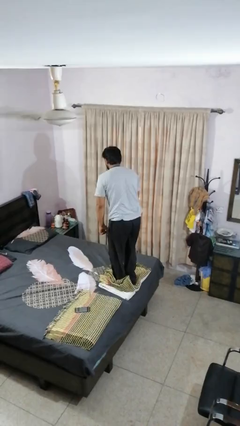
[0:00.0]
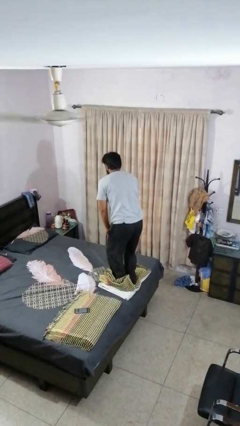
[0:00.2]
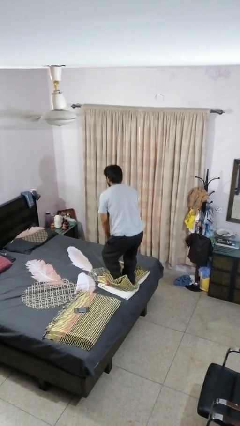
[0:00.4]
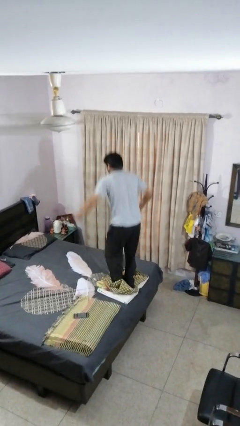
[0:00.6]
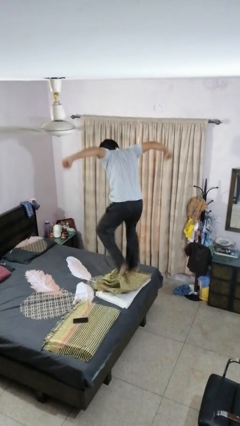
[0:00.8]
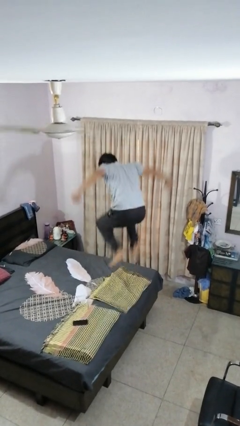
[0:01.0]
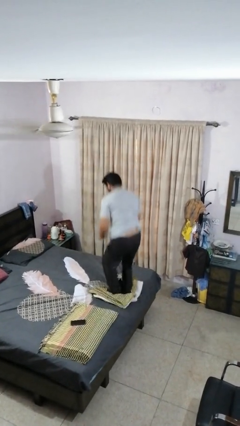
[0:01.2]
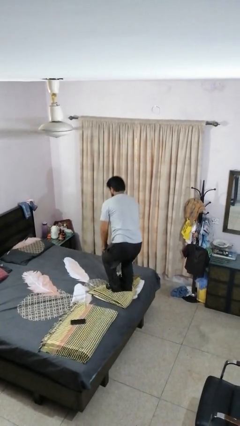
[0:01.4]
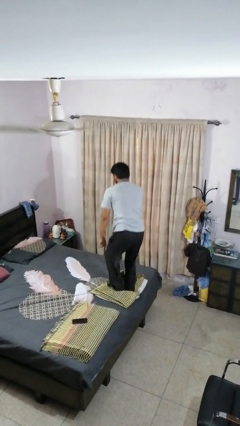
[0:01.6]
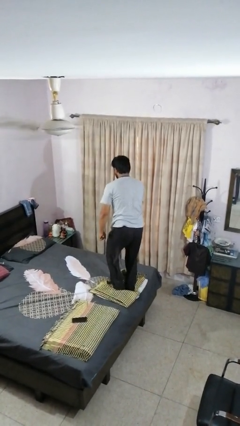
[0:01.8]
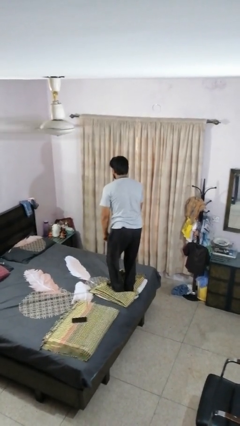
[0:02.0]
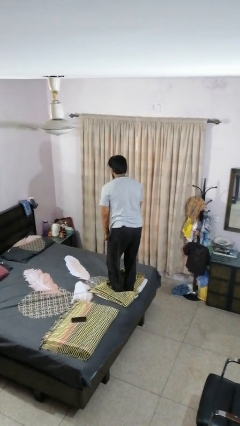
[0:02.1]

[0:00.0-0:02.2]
person jumps on bed

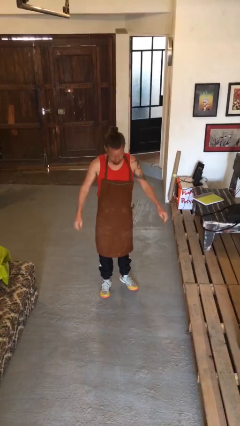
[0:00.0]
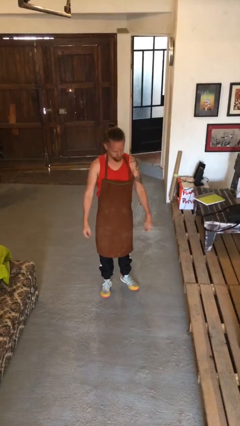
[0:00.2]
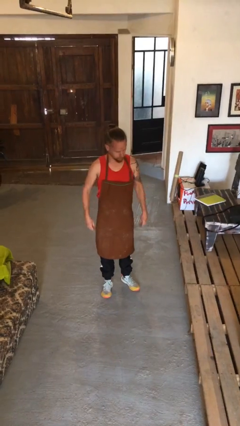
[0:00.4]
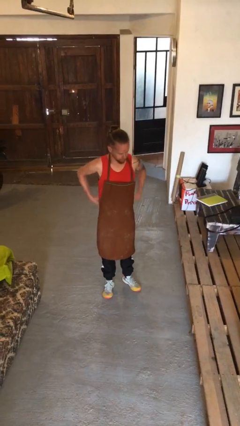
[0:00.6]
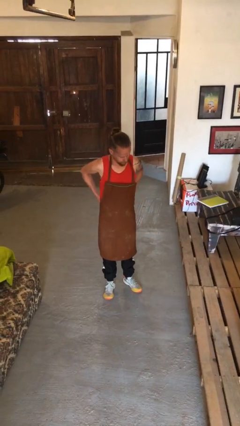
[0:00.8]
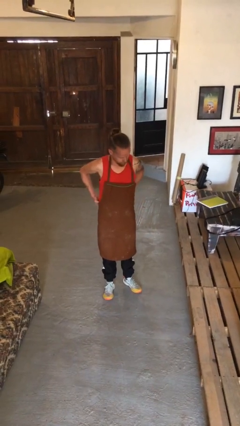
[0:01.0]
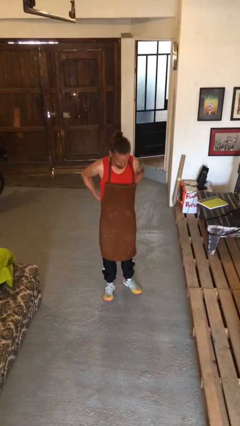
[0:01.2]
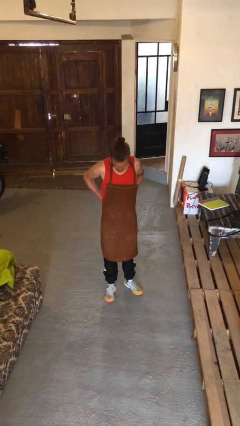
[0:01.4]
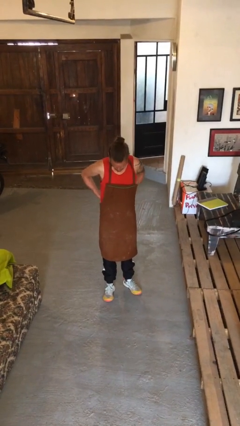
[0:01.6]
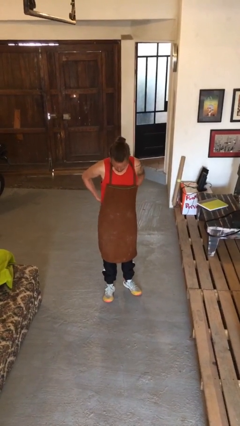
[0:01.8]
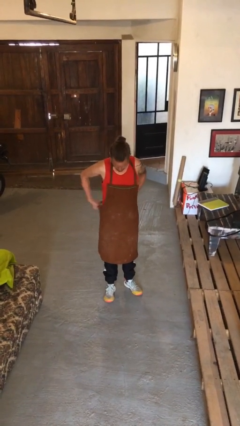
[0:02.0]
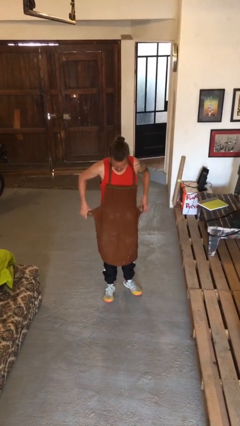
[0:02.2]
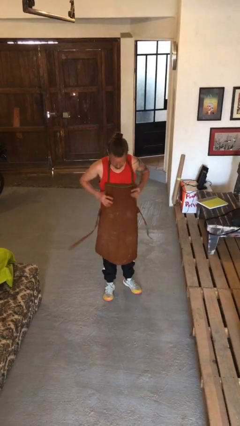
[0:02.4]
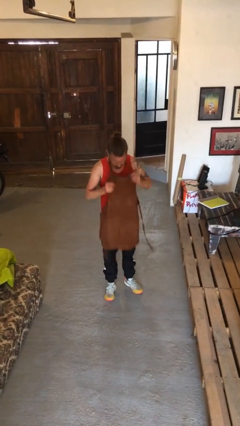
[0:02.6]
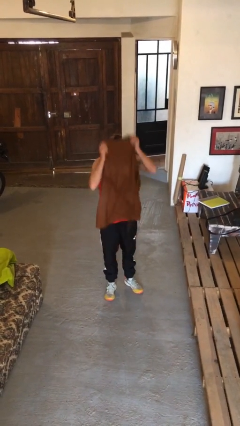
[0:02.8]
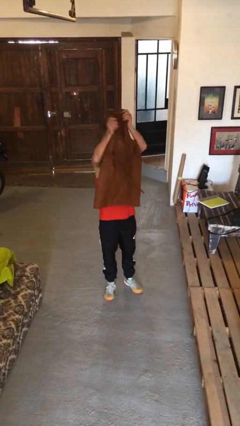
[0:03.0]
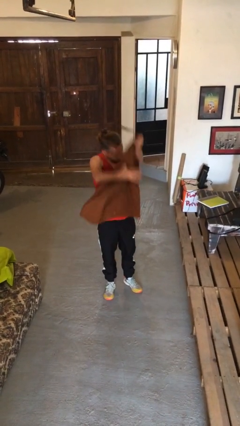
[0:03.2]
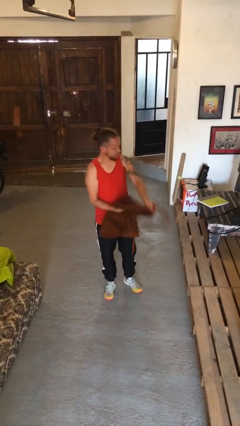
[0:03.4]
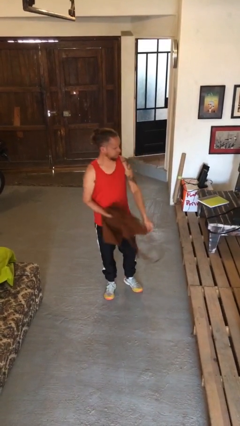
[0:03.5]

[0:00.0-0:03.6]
person takes off apron

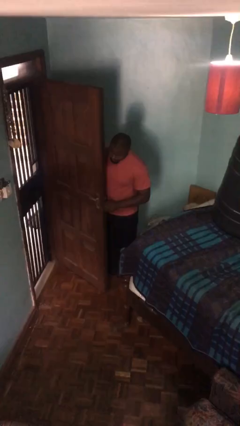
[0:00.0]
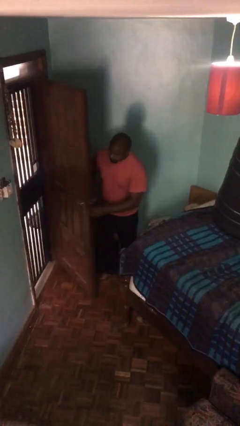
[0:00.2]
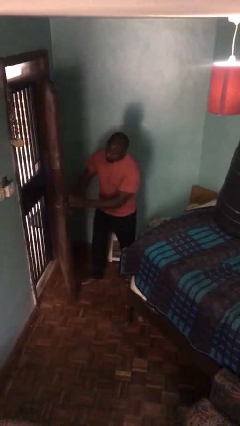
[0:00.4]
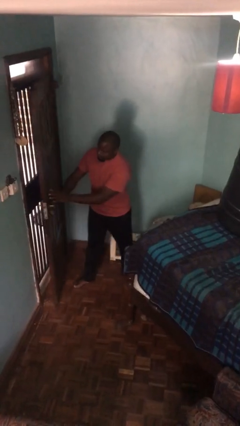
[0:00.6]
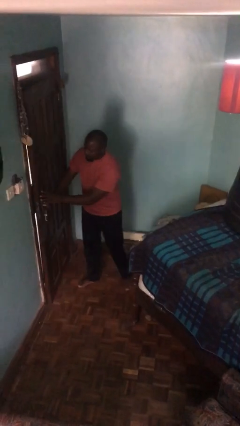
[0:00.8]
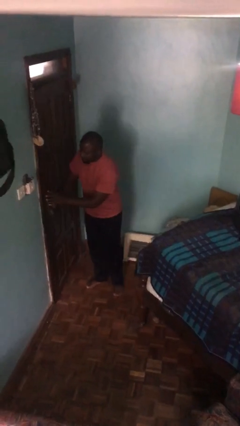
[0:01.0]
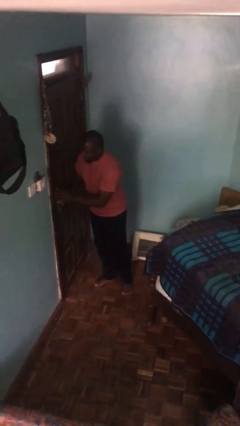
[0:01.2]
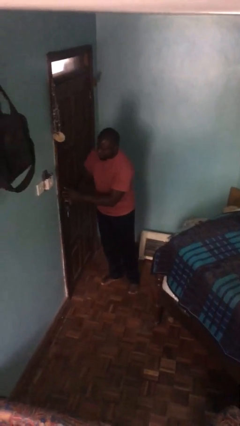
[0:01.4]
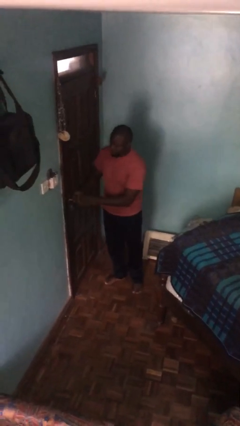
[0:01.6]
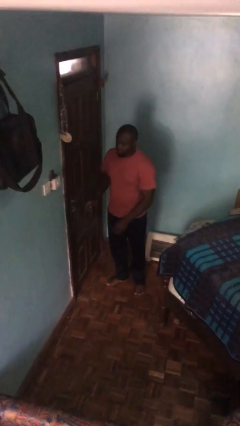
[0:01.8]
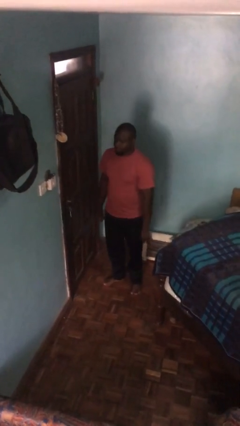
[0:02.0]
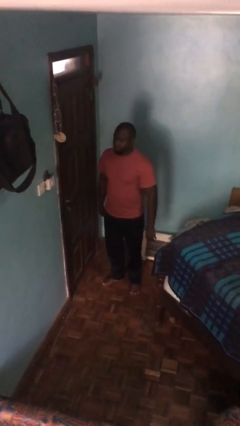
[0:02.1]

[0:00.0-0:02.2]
person closes facility door

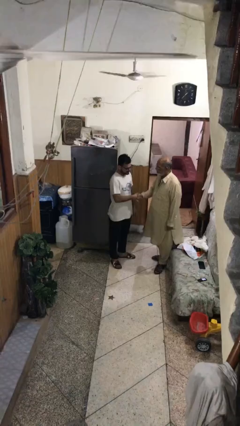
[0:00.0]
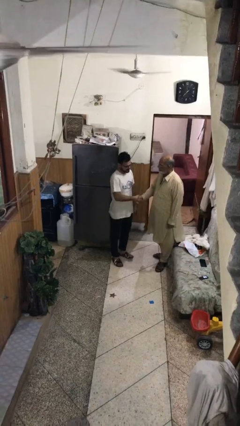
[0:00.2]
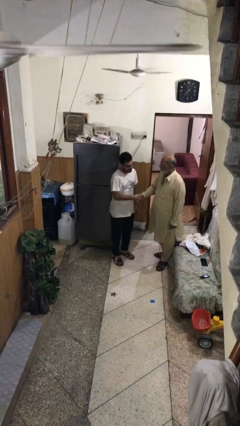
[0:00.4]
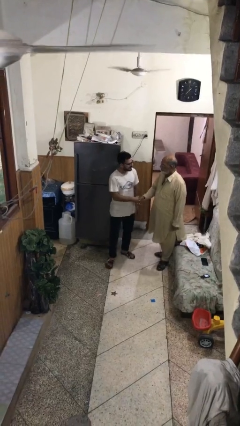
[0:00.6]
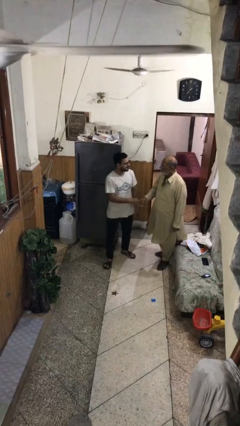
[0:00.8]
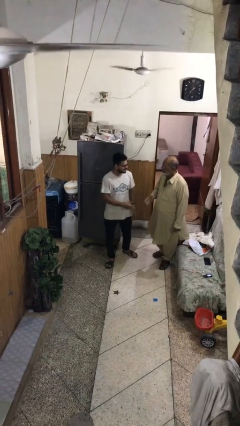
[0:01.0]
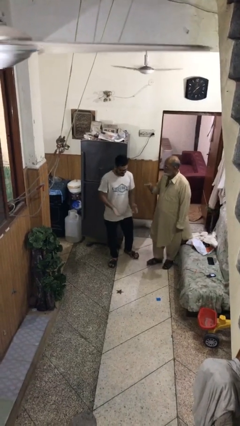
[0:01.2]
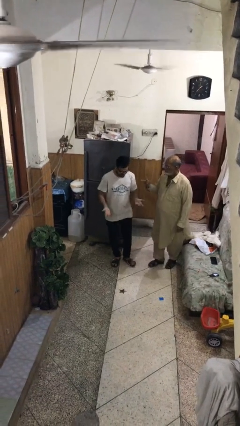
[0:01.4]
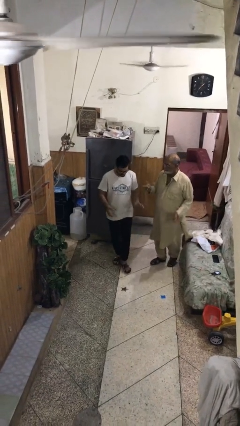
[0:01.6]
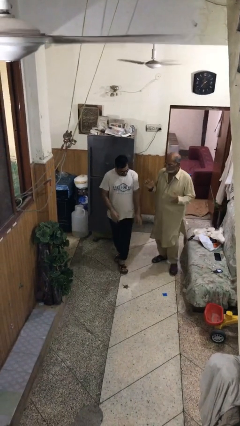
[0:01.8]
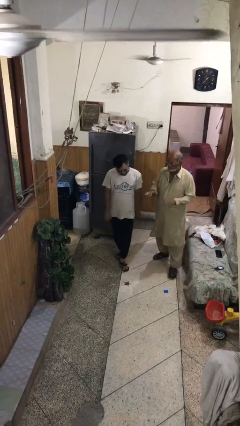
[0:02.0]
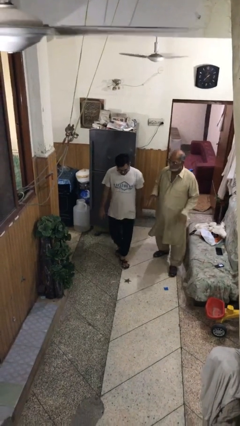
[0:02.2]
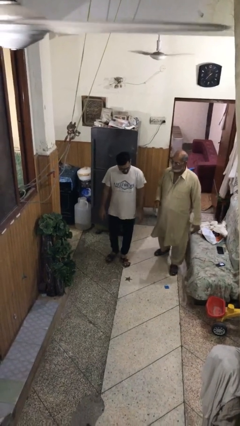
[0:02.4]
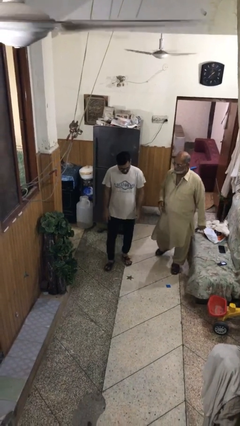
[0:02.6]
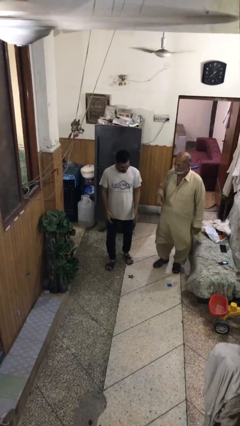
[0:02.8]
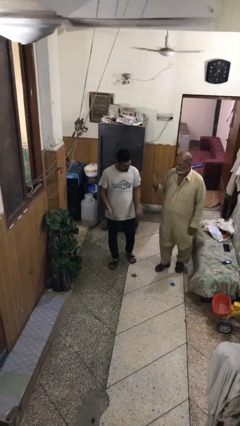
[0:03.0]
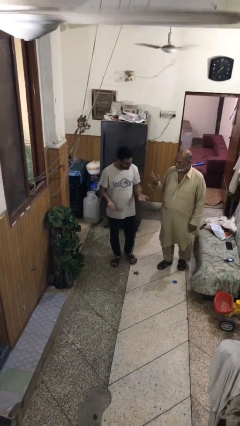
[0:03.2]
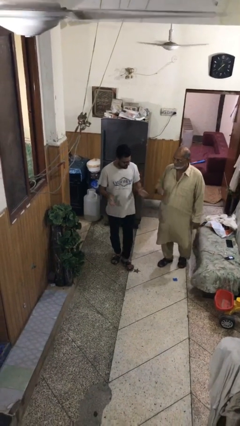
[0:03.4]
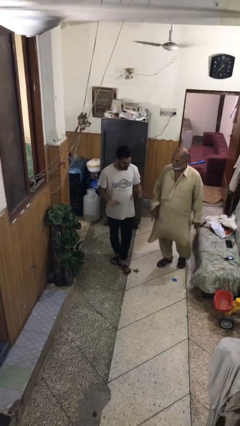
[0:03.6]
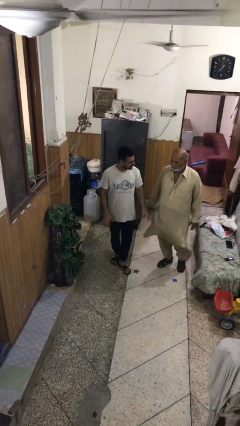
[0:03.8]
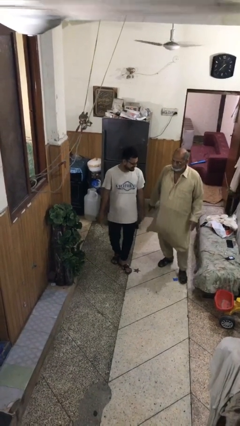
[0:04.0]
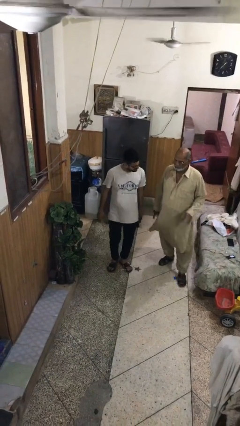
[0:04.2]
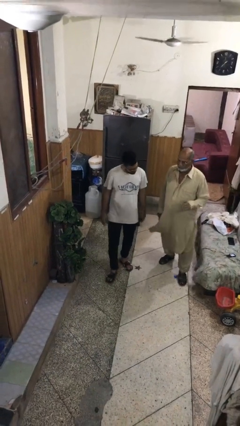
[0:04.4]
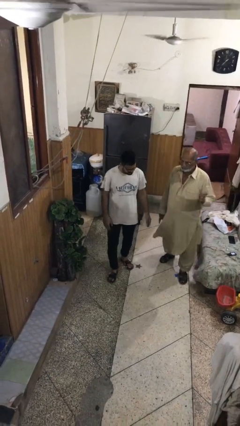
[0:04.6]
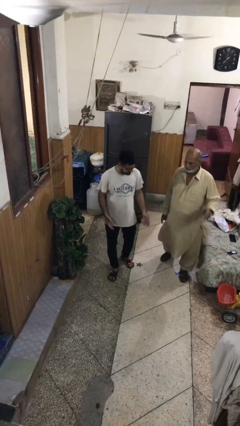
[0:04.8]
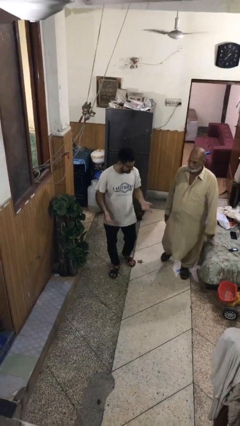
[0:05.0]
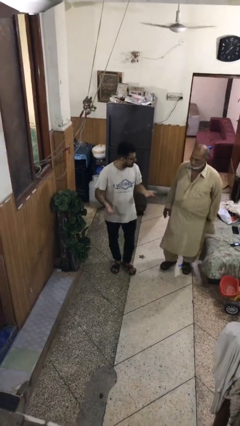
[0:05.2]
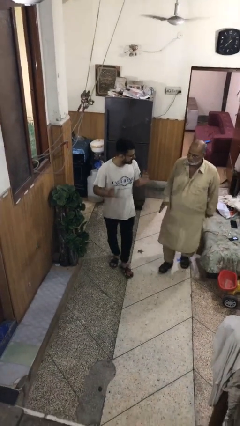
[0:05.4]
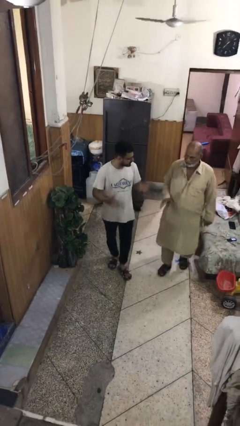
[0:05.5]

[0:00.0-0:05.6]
person talks to person

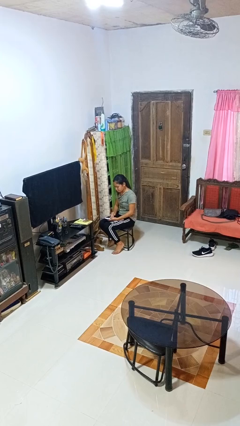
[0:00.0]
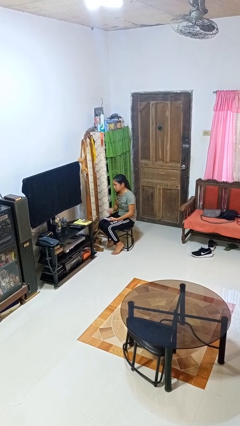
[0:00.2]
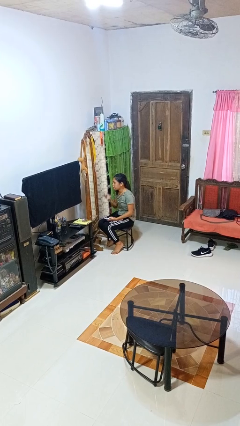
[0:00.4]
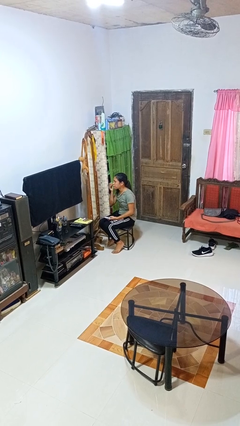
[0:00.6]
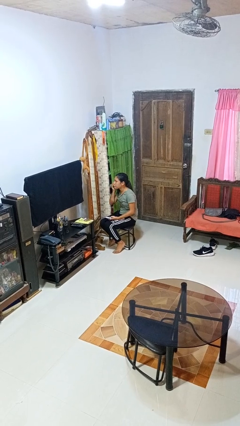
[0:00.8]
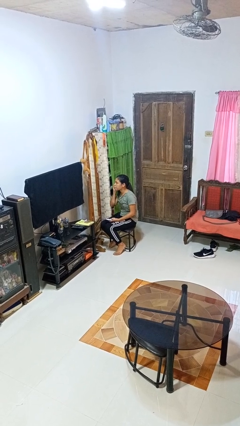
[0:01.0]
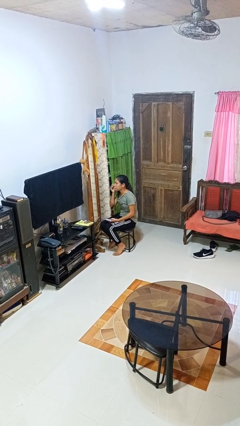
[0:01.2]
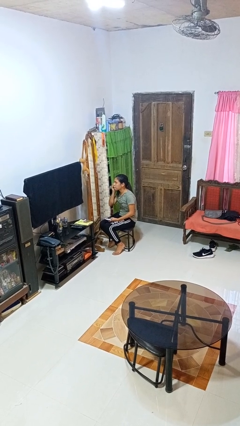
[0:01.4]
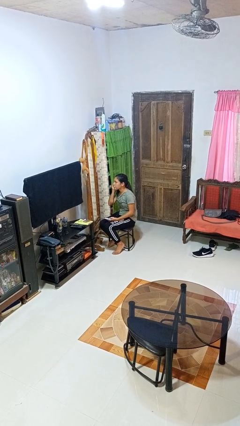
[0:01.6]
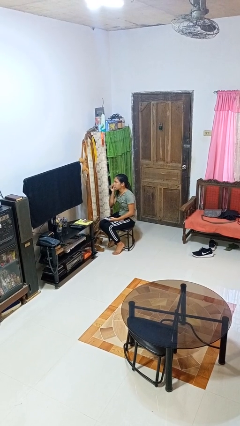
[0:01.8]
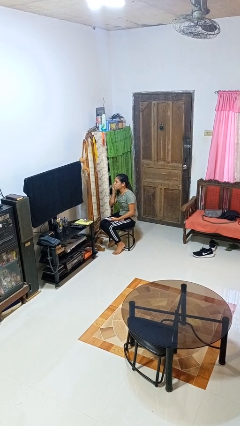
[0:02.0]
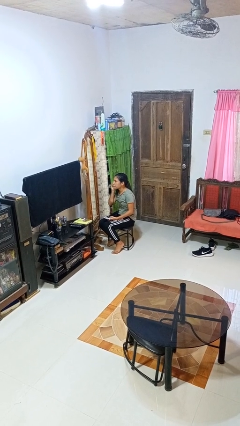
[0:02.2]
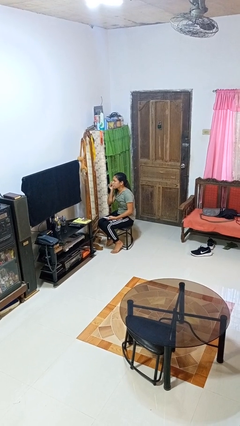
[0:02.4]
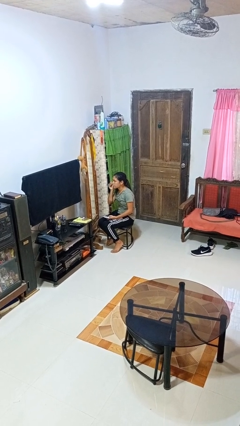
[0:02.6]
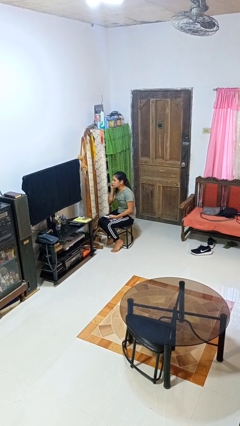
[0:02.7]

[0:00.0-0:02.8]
person applies foundation makeup

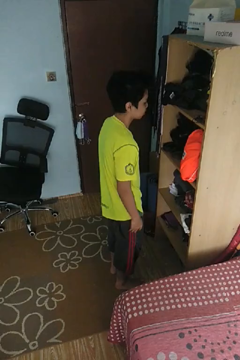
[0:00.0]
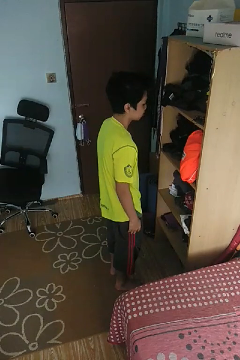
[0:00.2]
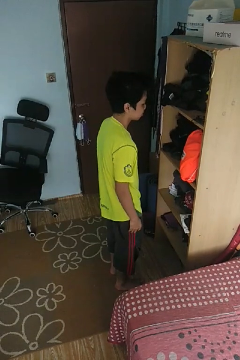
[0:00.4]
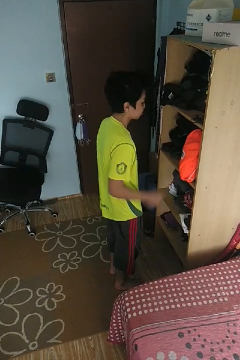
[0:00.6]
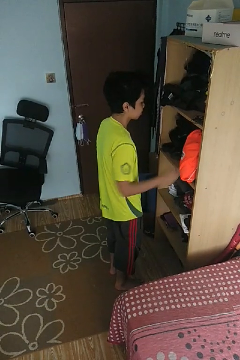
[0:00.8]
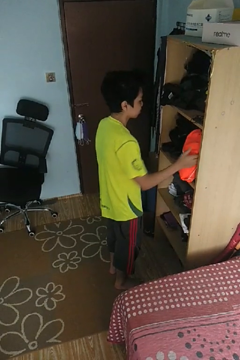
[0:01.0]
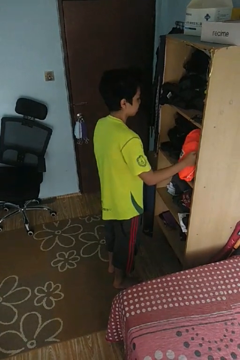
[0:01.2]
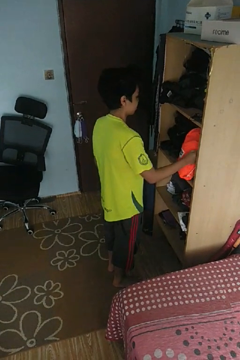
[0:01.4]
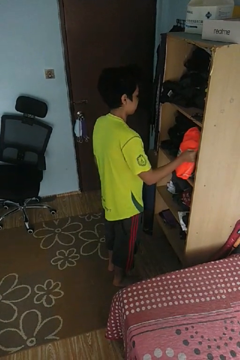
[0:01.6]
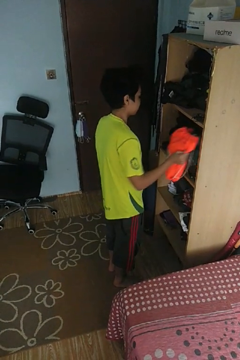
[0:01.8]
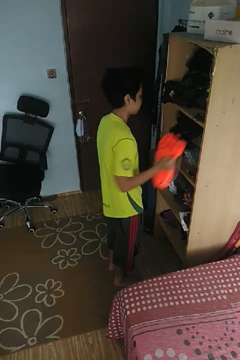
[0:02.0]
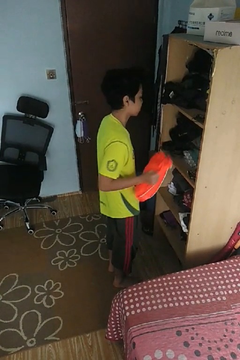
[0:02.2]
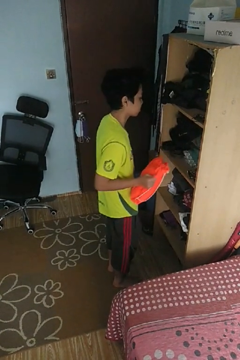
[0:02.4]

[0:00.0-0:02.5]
person picks up object from cabinet
